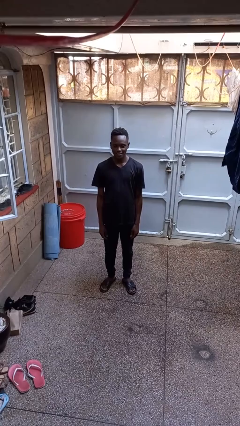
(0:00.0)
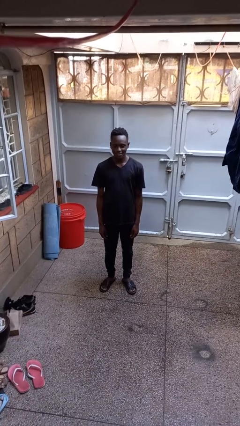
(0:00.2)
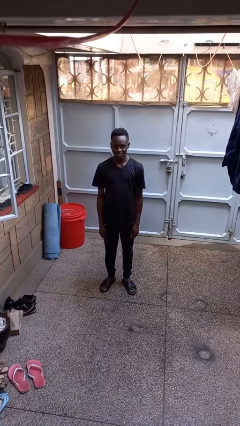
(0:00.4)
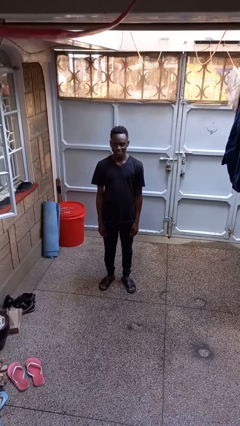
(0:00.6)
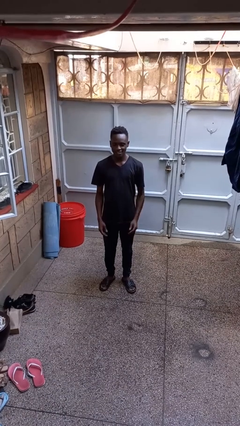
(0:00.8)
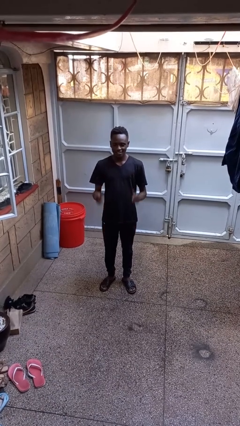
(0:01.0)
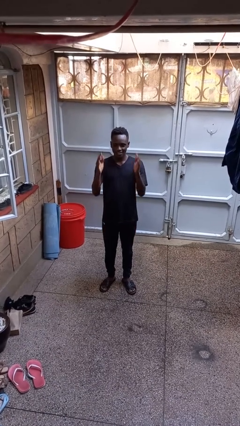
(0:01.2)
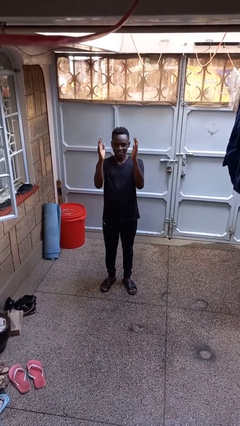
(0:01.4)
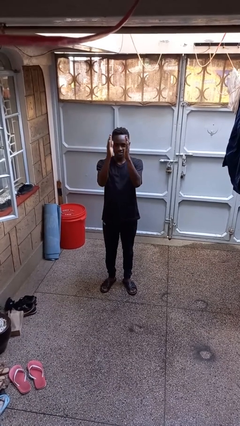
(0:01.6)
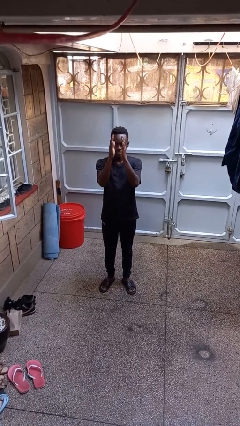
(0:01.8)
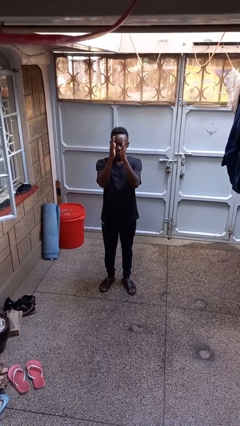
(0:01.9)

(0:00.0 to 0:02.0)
person gestures zoom in

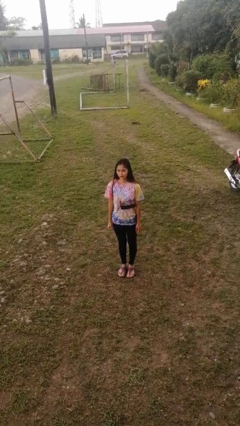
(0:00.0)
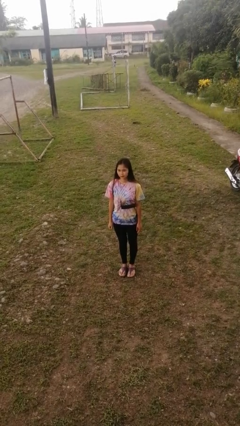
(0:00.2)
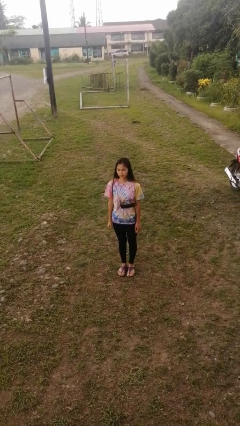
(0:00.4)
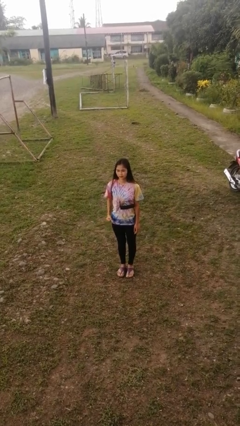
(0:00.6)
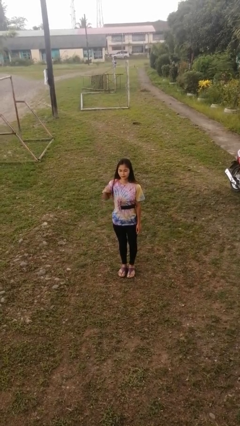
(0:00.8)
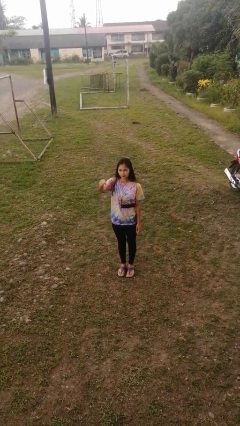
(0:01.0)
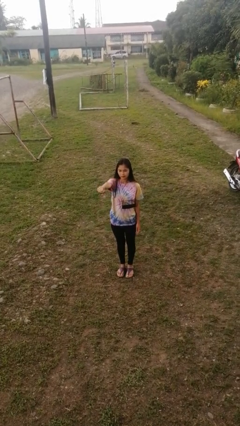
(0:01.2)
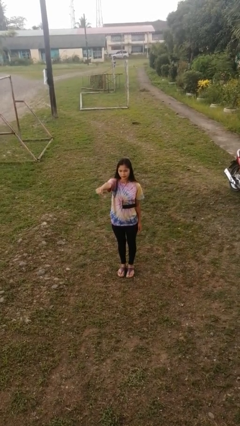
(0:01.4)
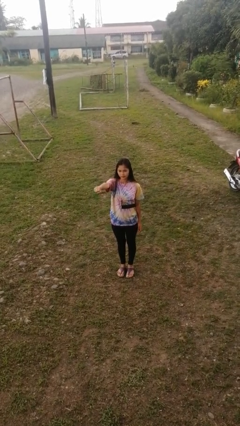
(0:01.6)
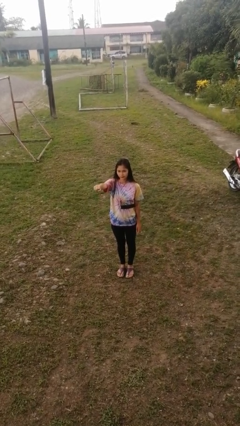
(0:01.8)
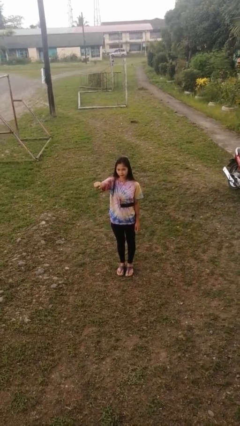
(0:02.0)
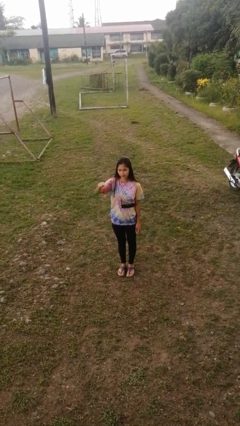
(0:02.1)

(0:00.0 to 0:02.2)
person punches

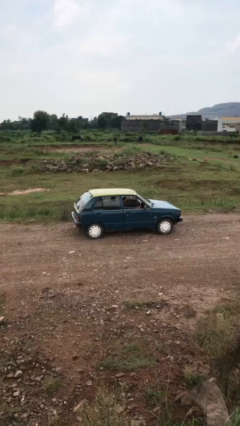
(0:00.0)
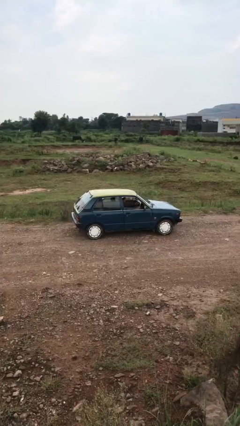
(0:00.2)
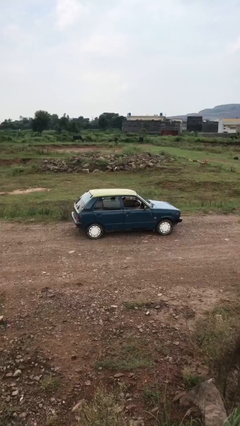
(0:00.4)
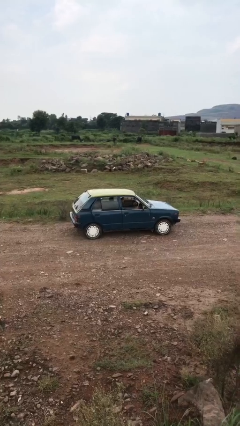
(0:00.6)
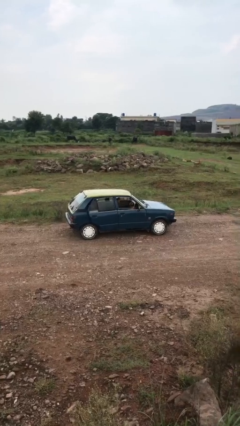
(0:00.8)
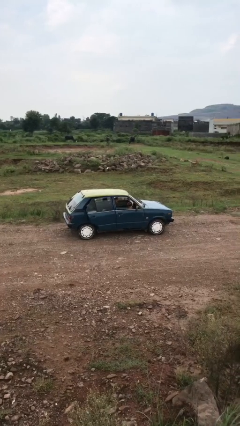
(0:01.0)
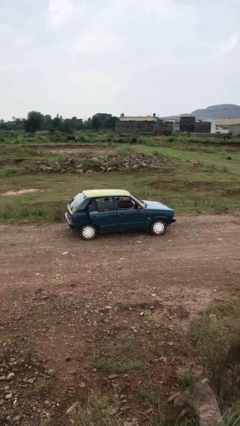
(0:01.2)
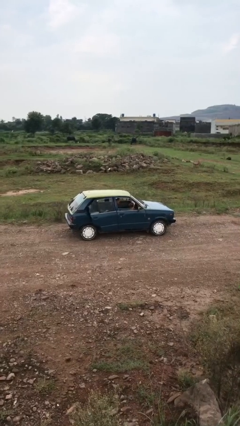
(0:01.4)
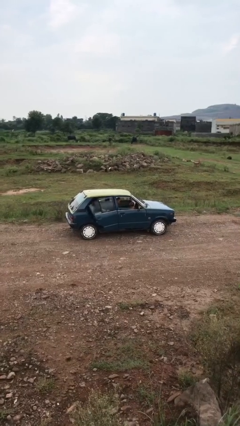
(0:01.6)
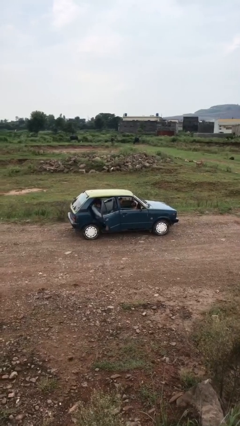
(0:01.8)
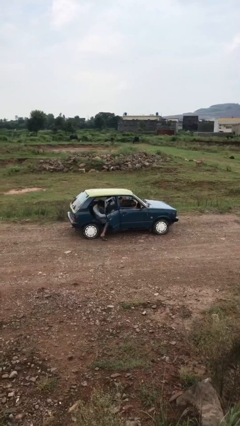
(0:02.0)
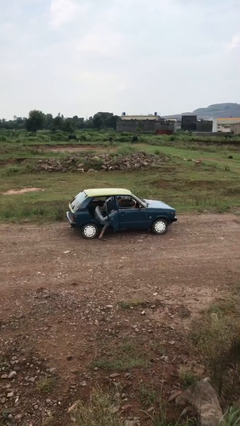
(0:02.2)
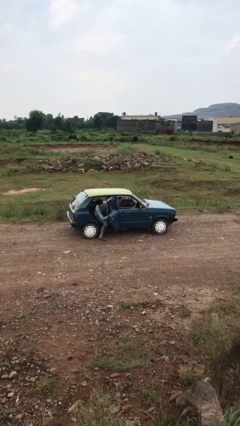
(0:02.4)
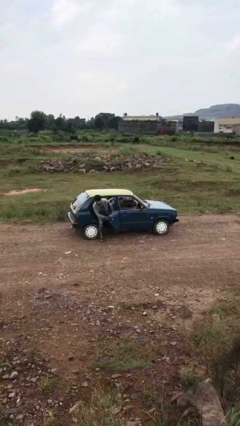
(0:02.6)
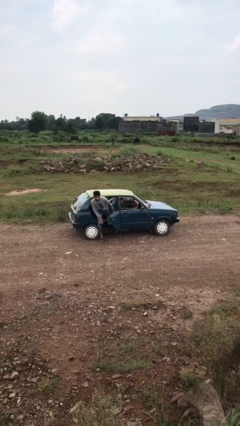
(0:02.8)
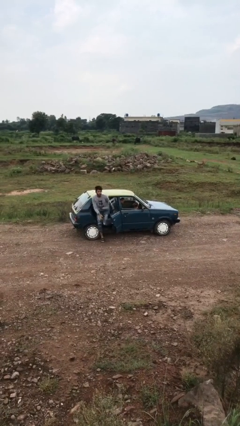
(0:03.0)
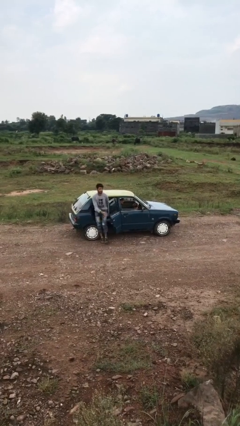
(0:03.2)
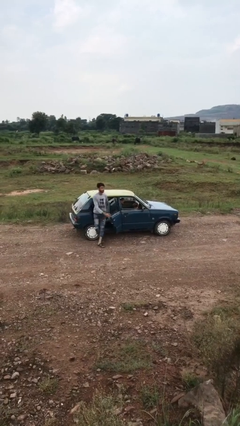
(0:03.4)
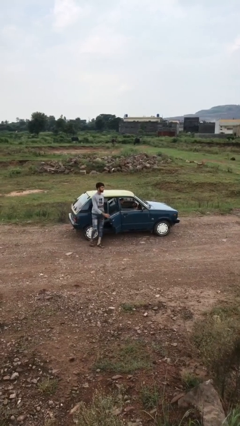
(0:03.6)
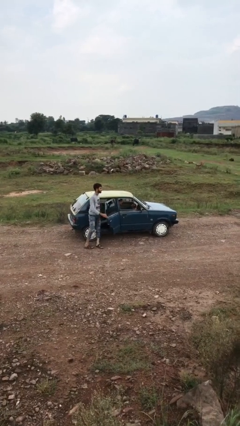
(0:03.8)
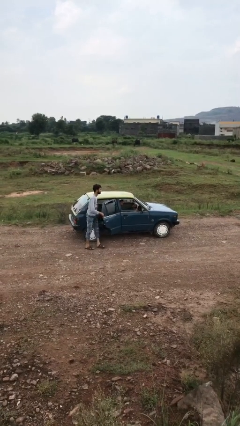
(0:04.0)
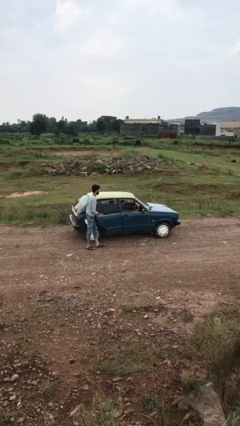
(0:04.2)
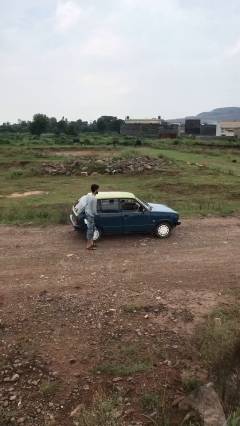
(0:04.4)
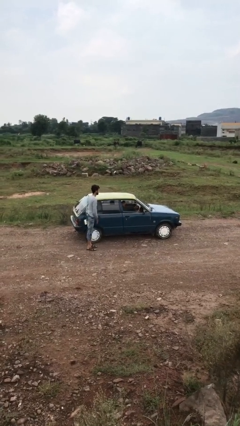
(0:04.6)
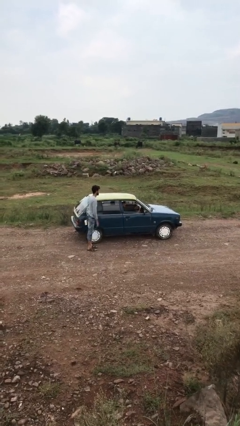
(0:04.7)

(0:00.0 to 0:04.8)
car drops off person

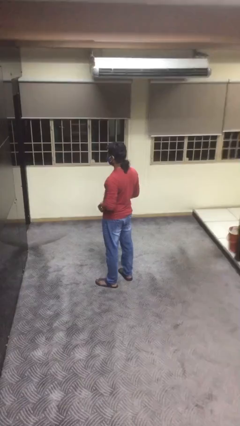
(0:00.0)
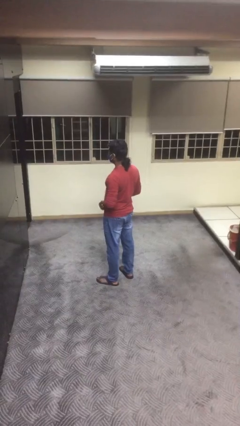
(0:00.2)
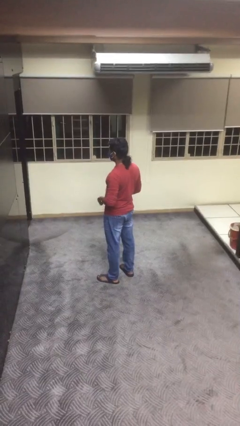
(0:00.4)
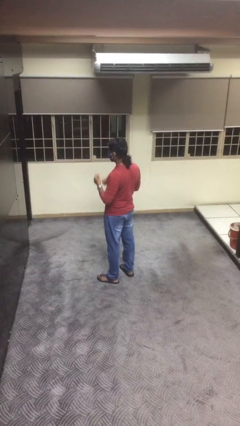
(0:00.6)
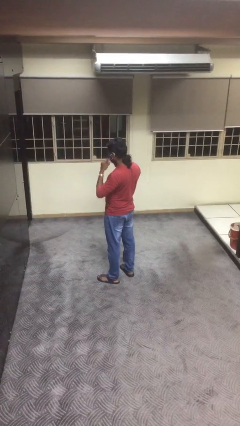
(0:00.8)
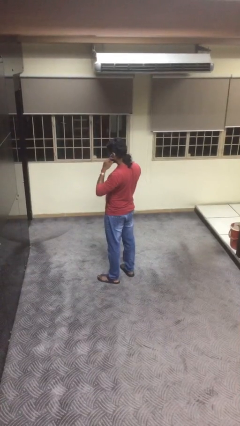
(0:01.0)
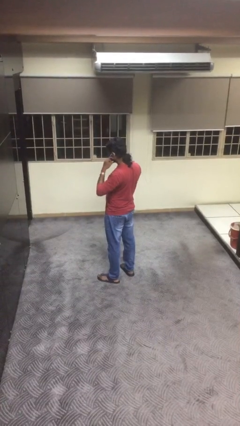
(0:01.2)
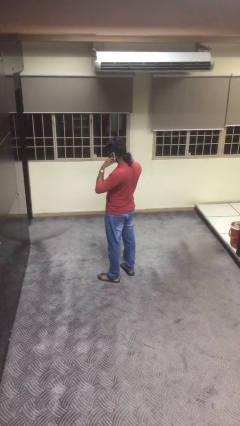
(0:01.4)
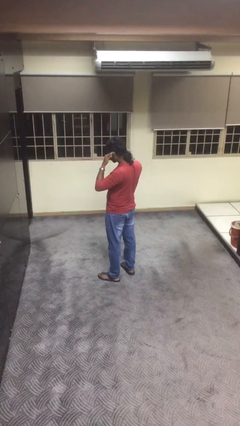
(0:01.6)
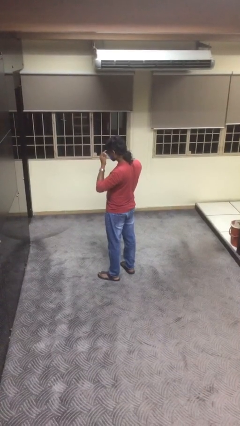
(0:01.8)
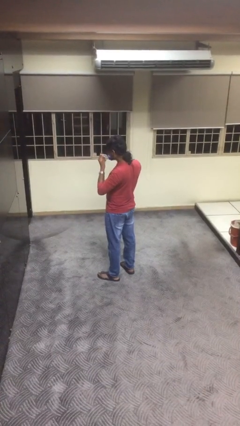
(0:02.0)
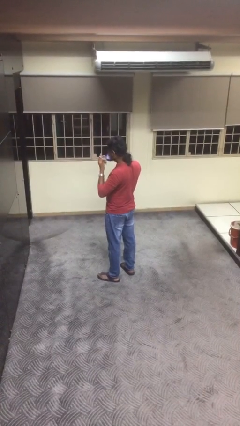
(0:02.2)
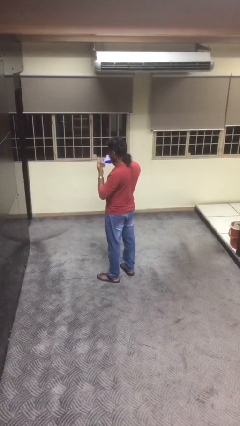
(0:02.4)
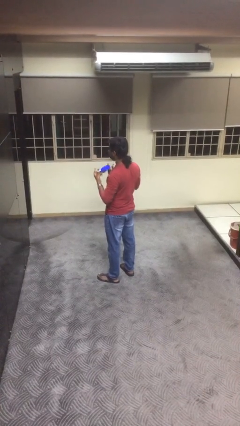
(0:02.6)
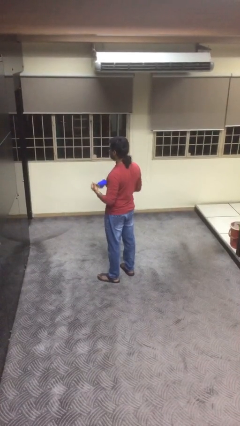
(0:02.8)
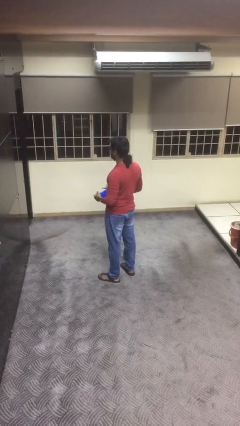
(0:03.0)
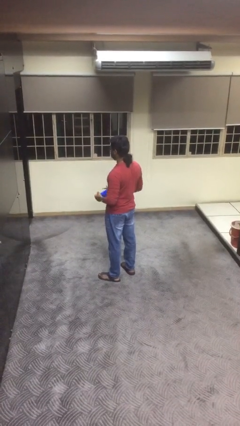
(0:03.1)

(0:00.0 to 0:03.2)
person takes off facemask

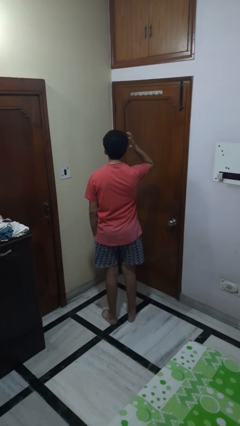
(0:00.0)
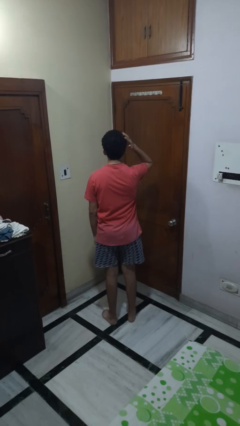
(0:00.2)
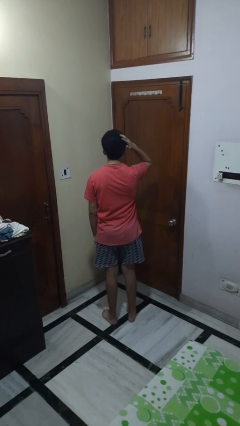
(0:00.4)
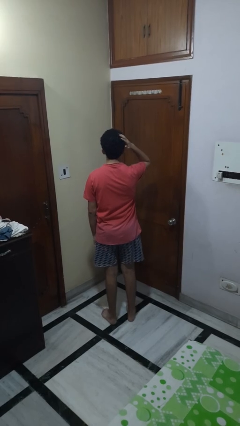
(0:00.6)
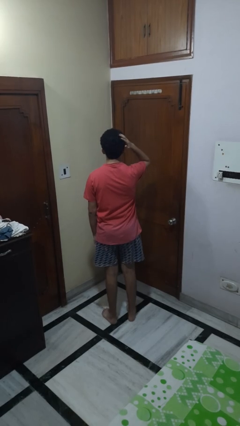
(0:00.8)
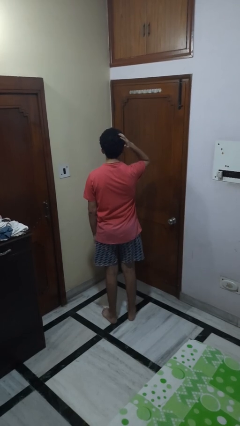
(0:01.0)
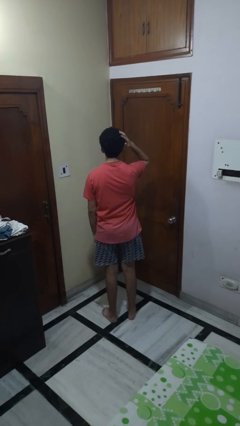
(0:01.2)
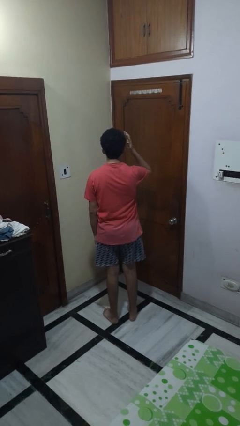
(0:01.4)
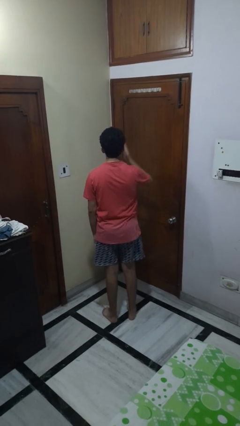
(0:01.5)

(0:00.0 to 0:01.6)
person pats head

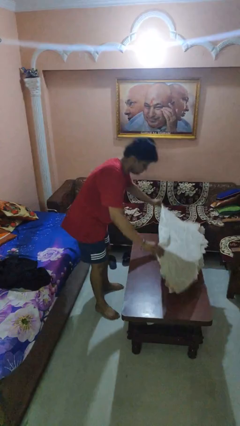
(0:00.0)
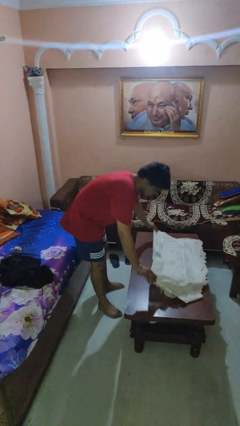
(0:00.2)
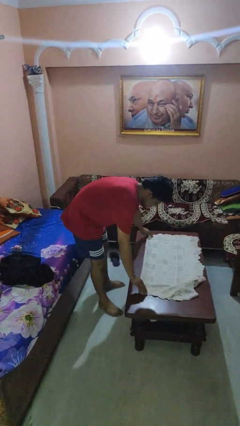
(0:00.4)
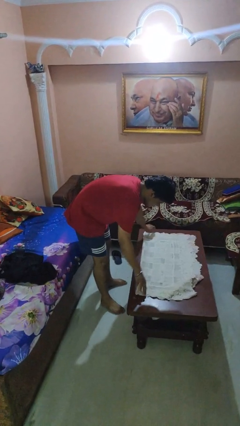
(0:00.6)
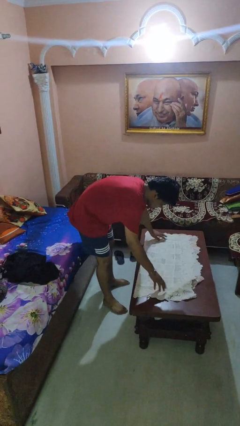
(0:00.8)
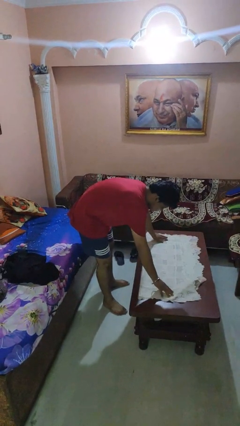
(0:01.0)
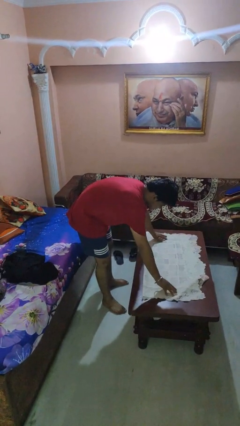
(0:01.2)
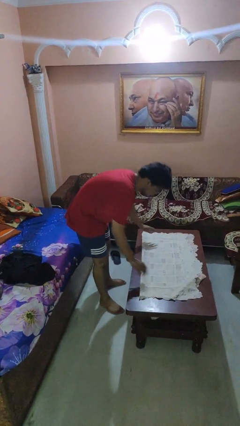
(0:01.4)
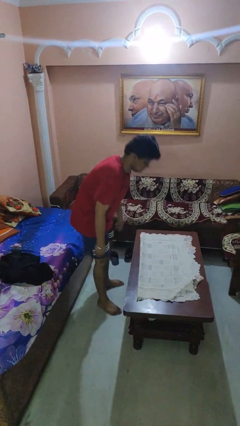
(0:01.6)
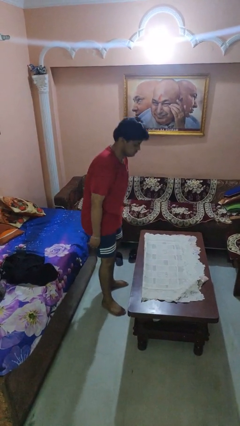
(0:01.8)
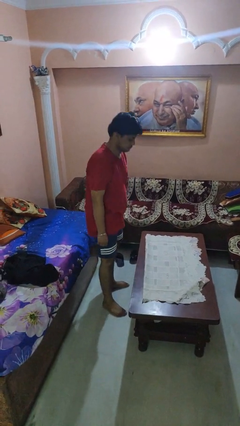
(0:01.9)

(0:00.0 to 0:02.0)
person spreads tablecloth

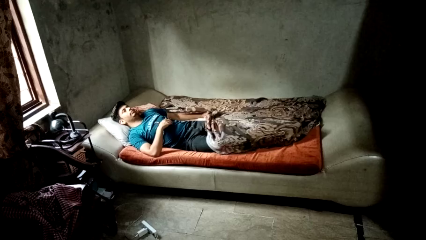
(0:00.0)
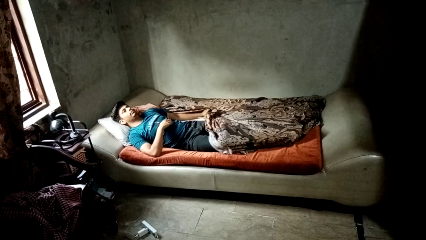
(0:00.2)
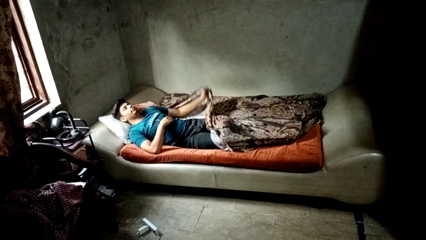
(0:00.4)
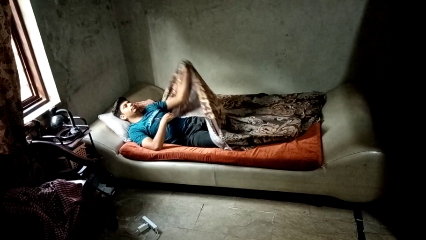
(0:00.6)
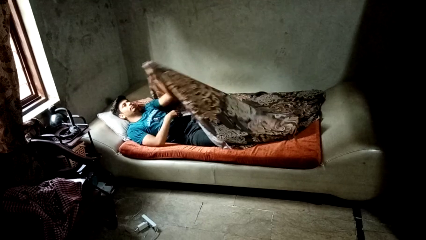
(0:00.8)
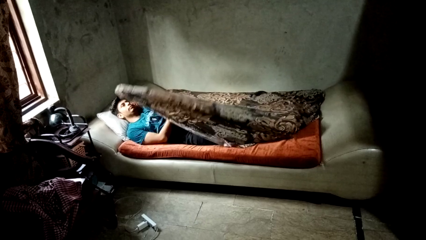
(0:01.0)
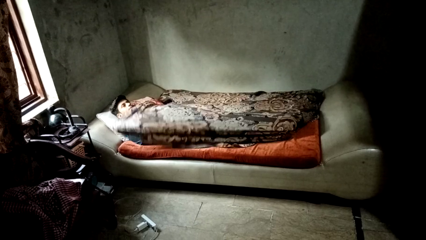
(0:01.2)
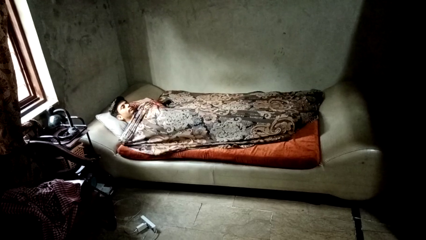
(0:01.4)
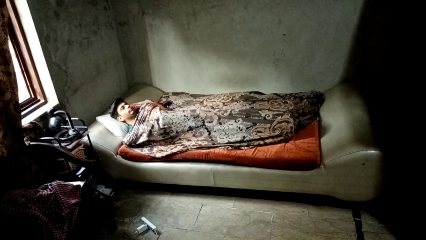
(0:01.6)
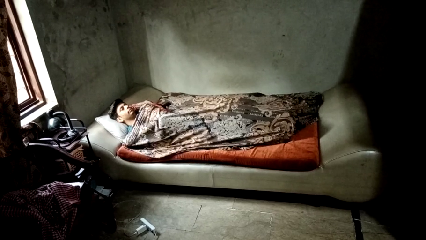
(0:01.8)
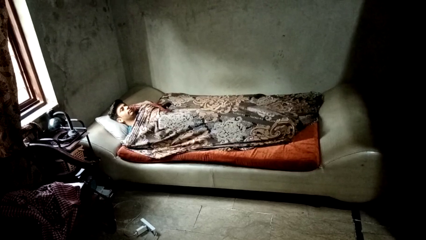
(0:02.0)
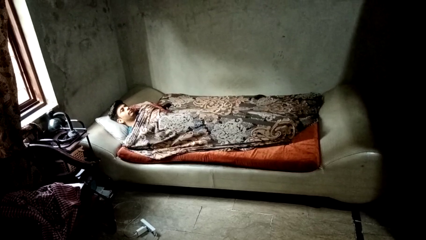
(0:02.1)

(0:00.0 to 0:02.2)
person covers with bedsheets
